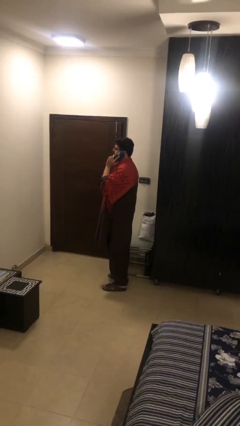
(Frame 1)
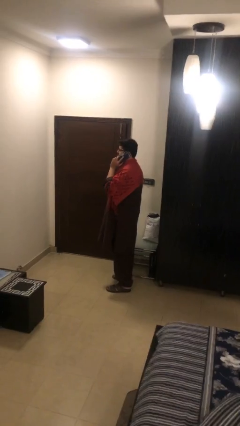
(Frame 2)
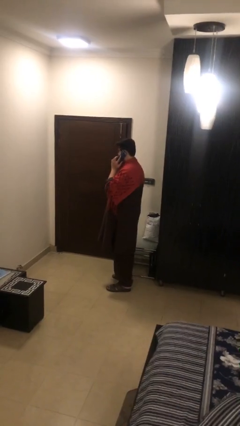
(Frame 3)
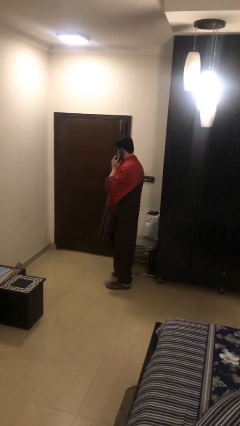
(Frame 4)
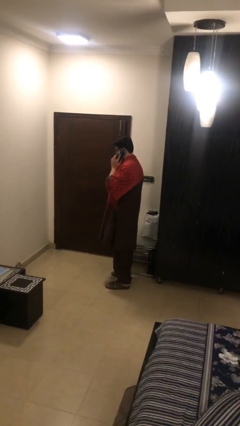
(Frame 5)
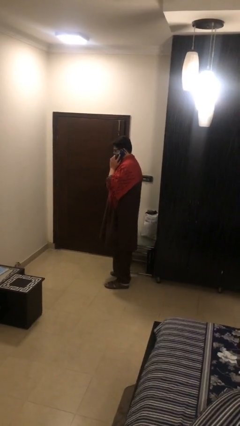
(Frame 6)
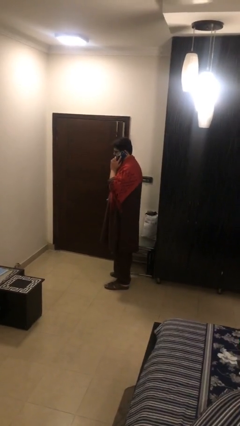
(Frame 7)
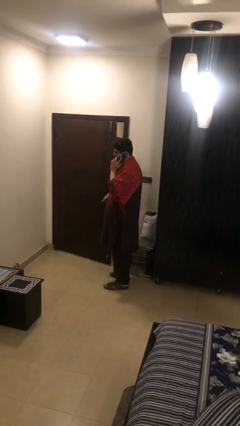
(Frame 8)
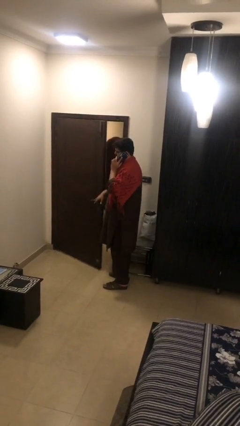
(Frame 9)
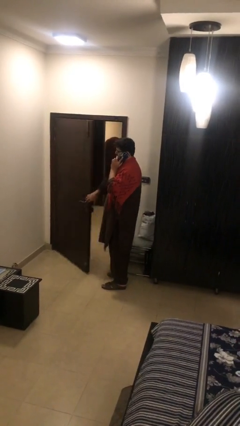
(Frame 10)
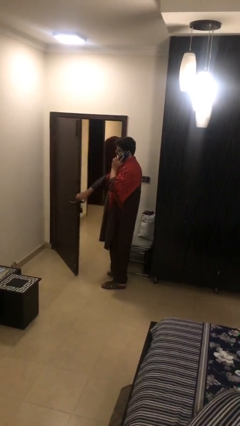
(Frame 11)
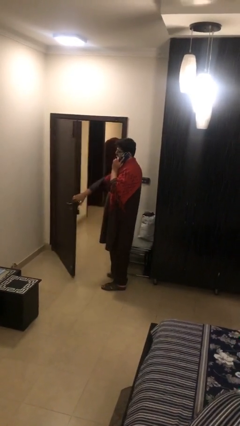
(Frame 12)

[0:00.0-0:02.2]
person opens facility door

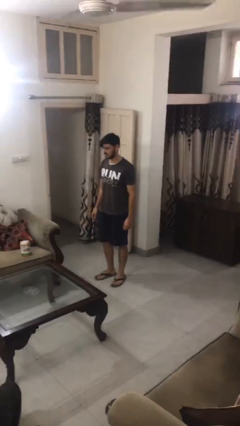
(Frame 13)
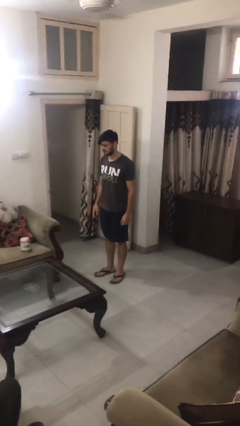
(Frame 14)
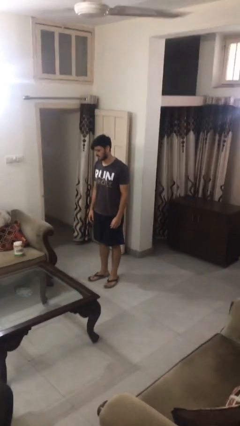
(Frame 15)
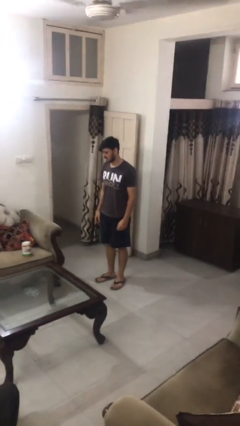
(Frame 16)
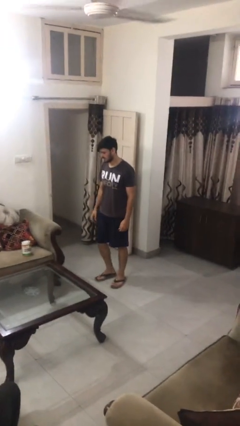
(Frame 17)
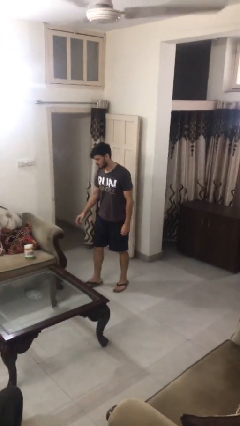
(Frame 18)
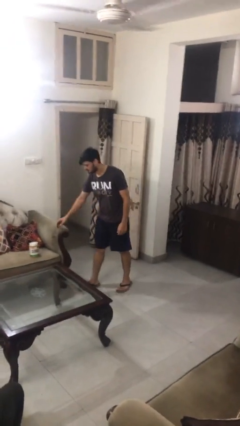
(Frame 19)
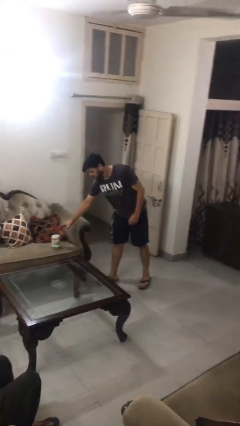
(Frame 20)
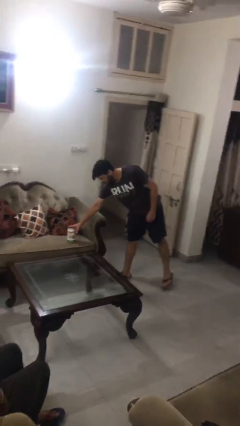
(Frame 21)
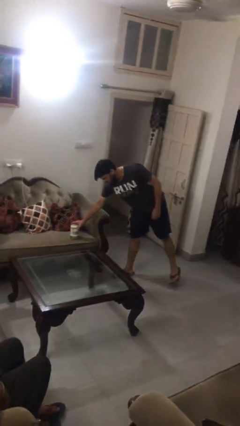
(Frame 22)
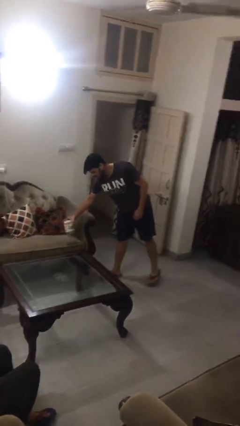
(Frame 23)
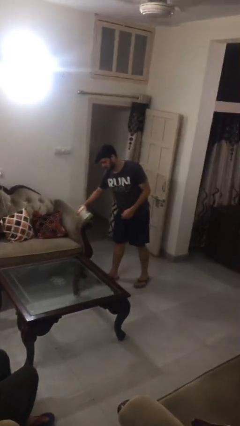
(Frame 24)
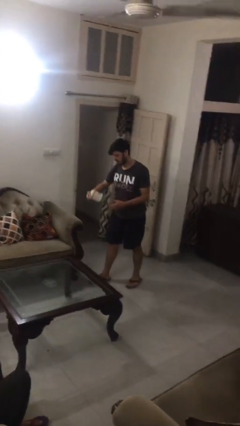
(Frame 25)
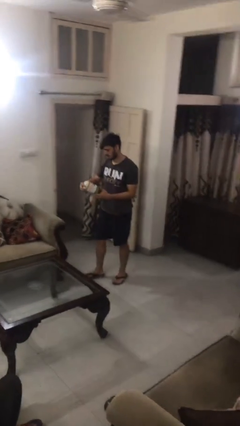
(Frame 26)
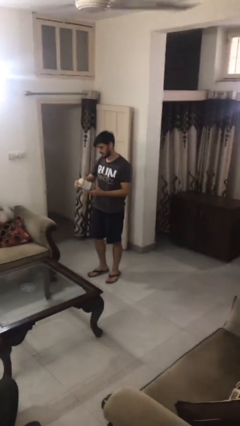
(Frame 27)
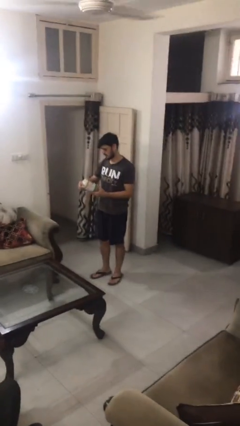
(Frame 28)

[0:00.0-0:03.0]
person picks up object from couch

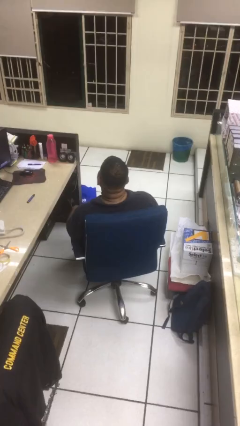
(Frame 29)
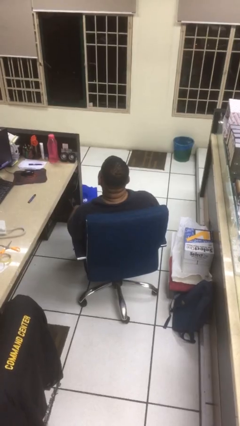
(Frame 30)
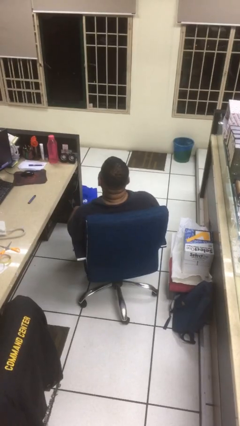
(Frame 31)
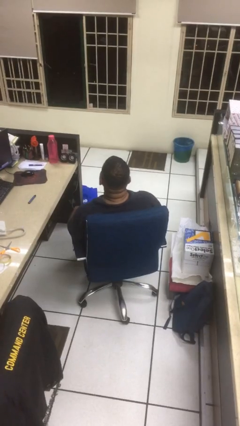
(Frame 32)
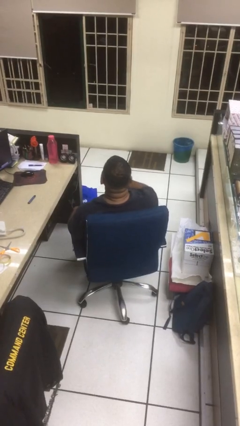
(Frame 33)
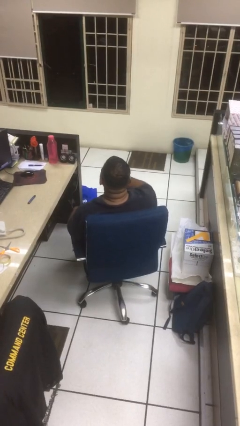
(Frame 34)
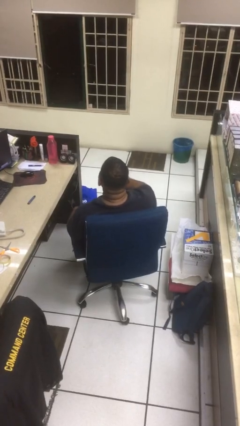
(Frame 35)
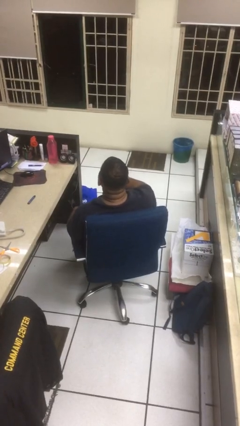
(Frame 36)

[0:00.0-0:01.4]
person gestures be quiet

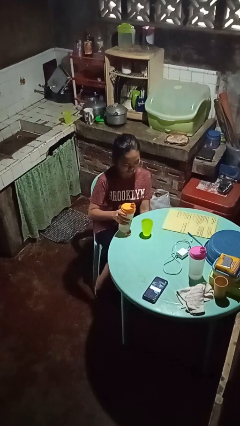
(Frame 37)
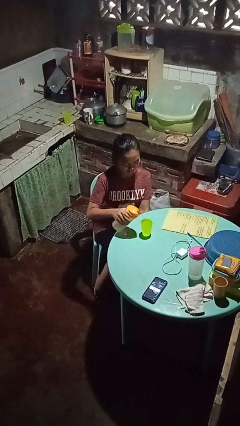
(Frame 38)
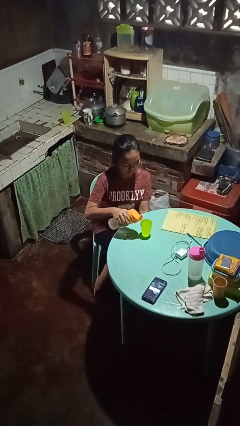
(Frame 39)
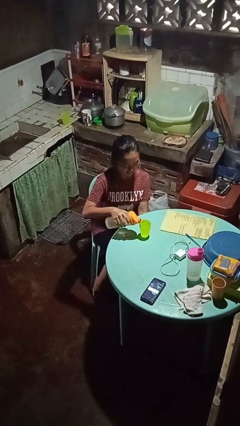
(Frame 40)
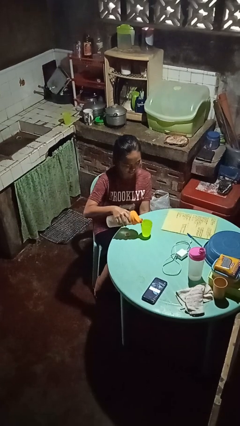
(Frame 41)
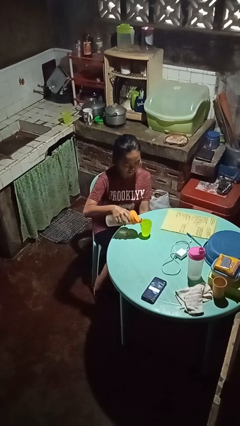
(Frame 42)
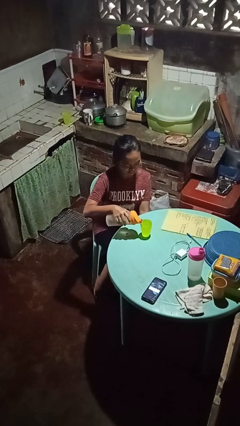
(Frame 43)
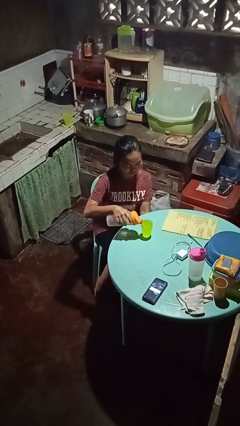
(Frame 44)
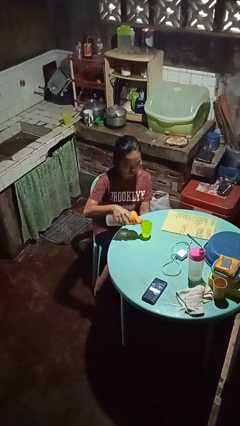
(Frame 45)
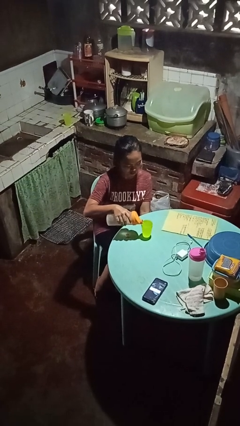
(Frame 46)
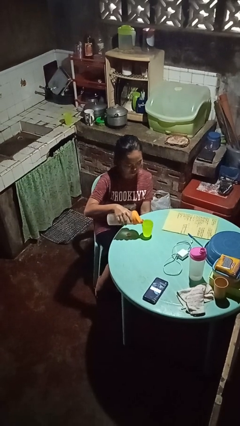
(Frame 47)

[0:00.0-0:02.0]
person pours liquid into cup

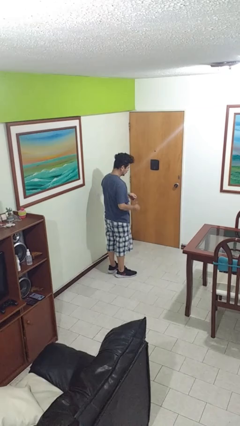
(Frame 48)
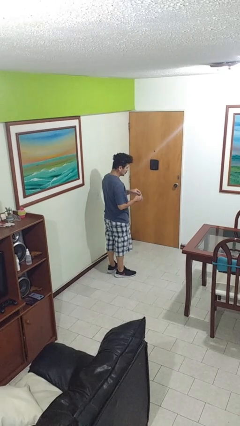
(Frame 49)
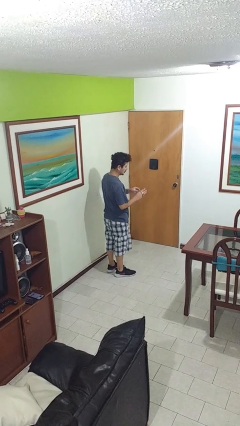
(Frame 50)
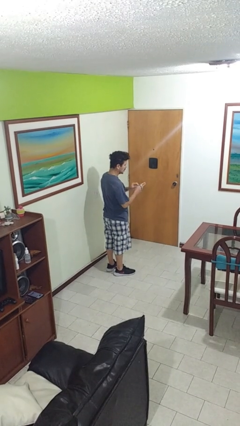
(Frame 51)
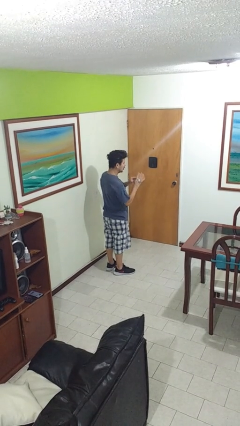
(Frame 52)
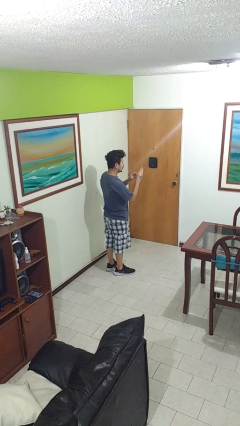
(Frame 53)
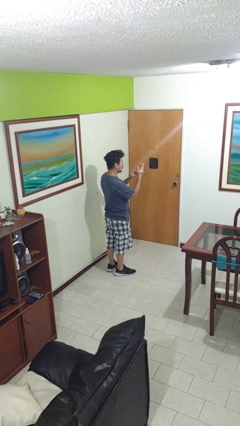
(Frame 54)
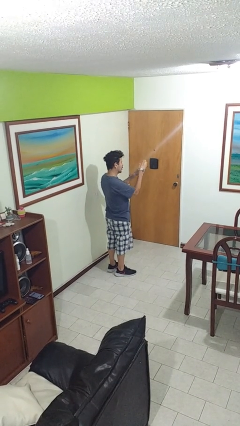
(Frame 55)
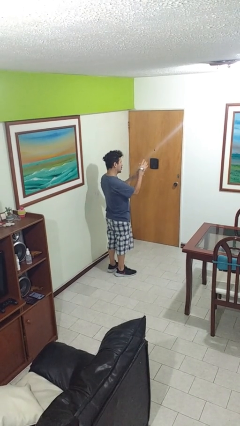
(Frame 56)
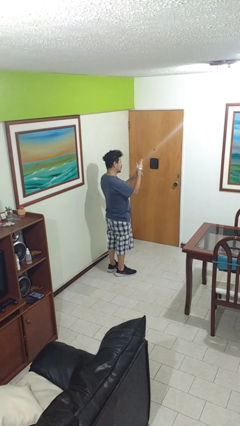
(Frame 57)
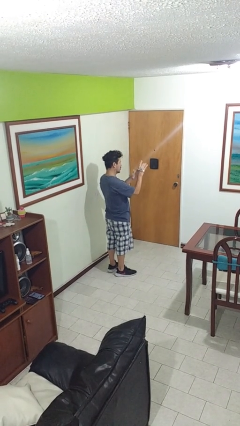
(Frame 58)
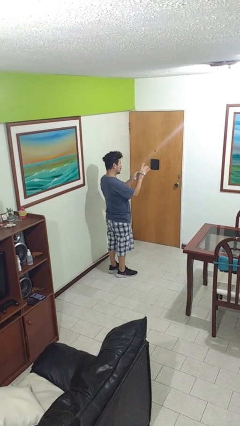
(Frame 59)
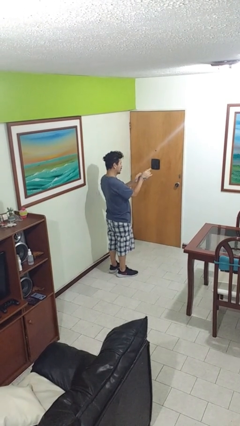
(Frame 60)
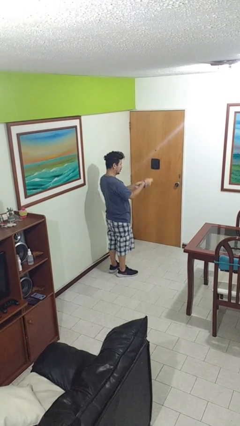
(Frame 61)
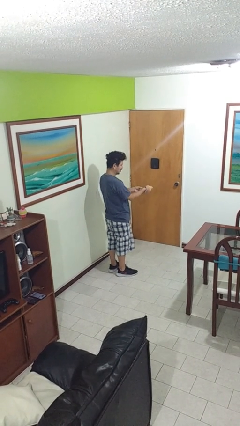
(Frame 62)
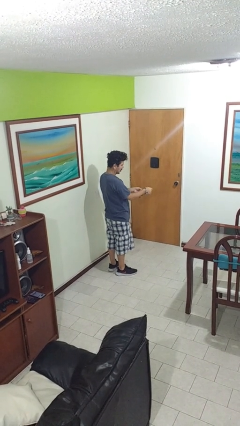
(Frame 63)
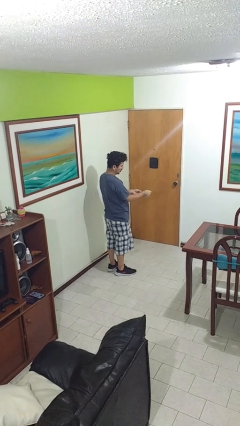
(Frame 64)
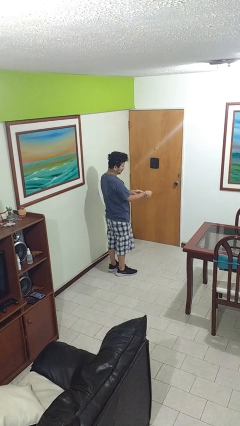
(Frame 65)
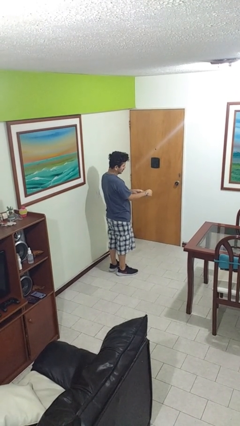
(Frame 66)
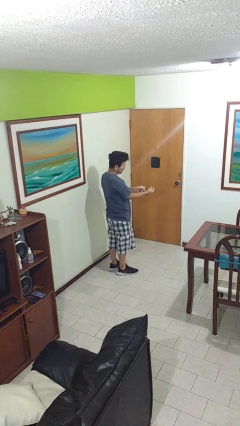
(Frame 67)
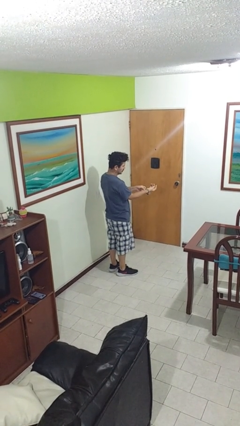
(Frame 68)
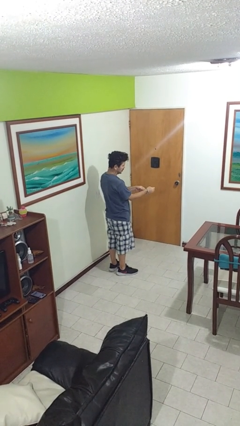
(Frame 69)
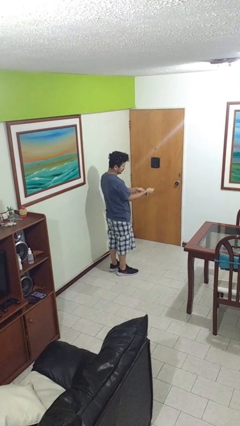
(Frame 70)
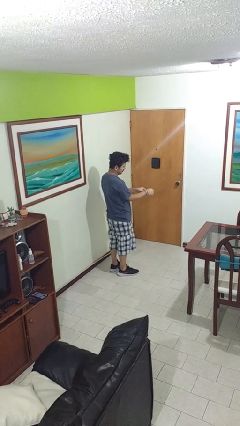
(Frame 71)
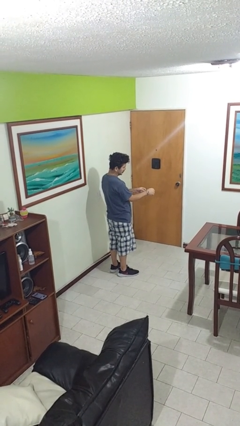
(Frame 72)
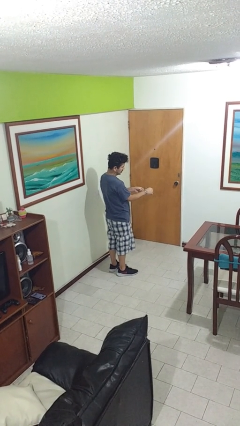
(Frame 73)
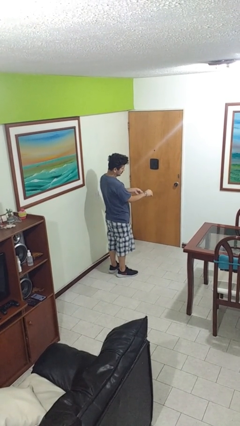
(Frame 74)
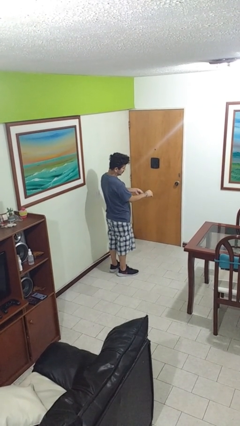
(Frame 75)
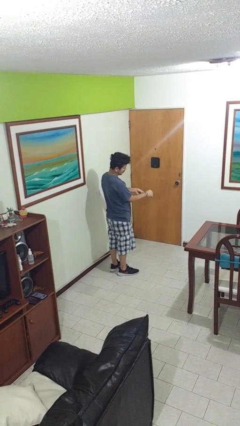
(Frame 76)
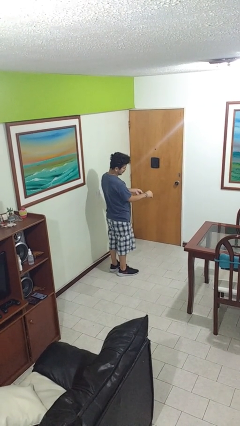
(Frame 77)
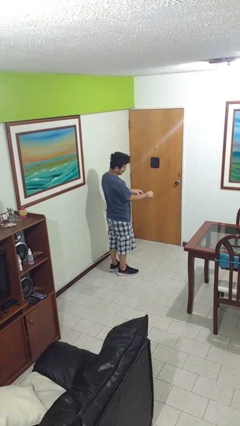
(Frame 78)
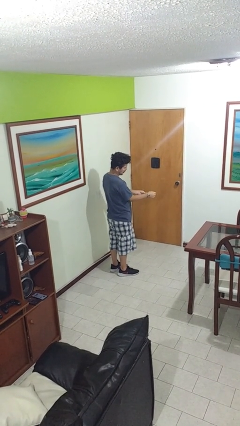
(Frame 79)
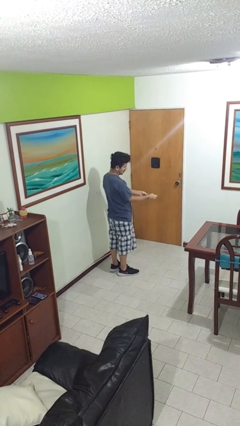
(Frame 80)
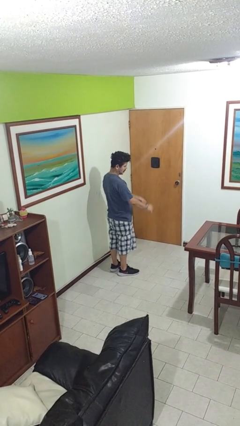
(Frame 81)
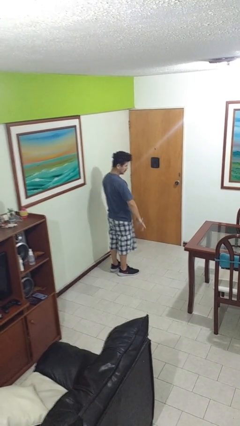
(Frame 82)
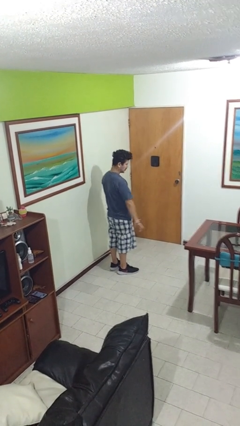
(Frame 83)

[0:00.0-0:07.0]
person puts on wristwatch

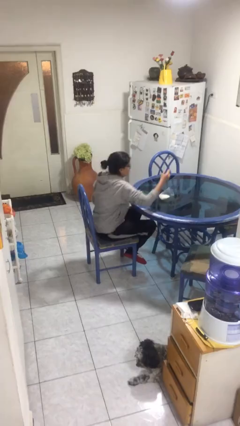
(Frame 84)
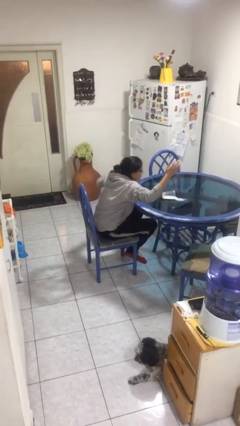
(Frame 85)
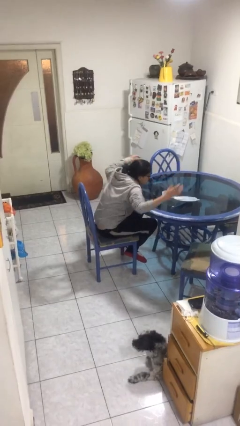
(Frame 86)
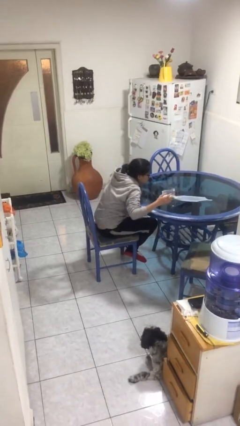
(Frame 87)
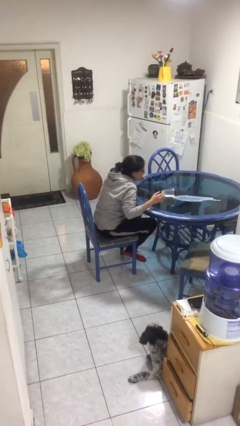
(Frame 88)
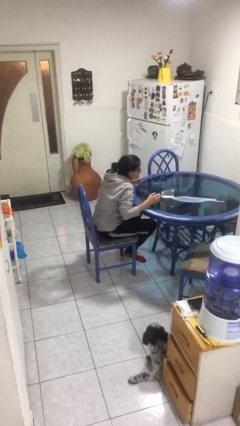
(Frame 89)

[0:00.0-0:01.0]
person spills on table

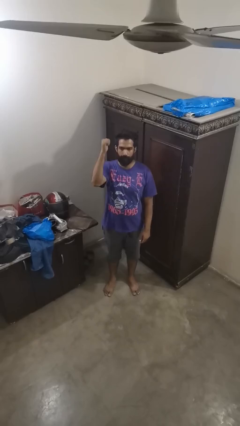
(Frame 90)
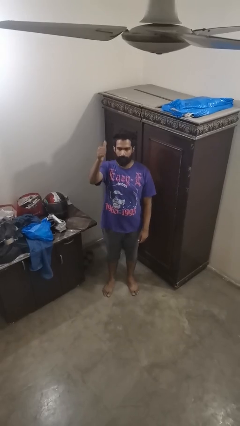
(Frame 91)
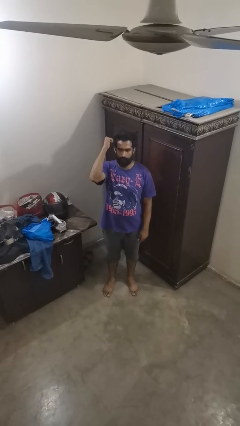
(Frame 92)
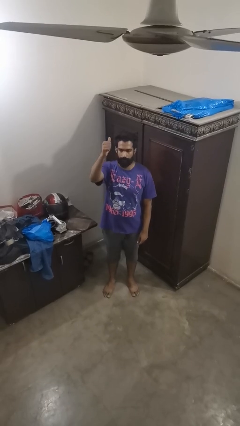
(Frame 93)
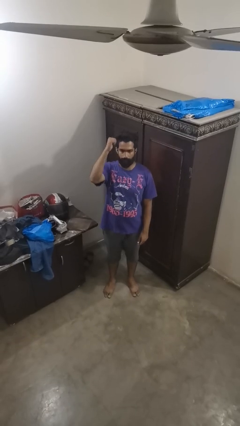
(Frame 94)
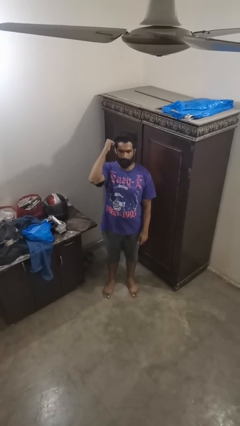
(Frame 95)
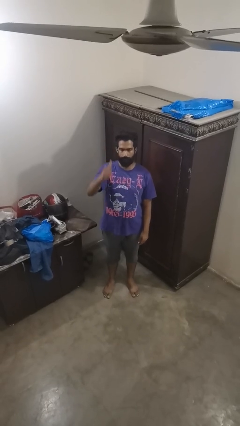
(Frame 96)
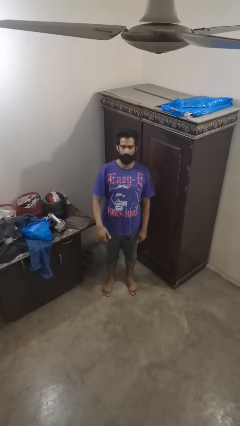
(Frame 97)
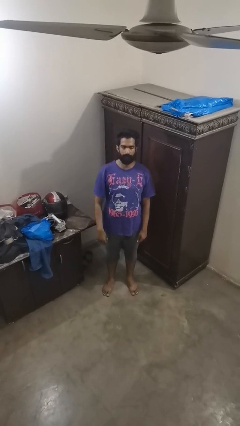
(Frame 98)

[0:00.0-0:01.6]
person gestures behind me
